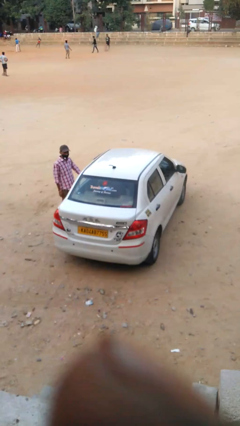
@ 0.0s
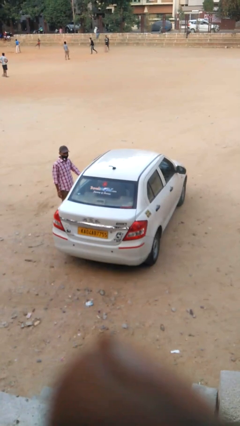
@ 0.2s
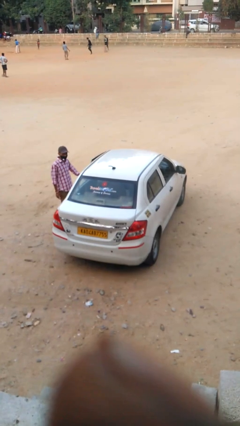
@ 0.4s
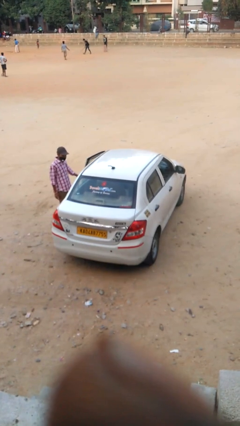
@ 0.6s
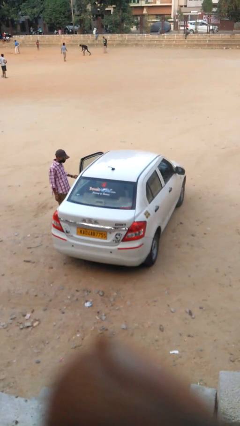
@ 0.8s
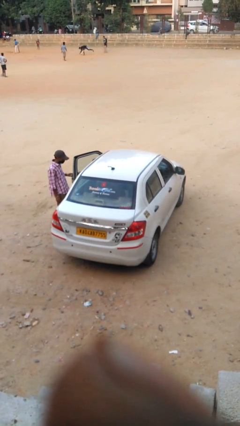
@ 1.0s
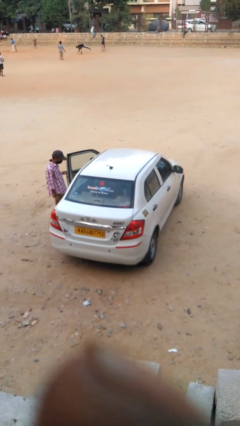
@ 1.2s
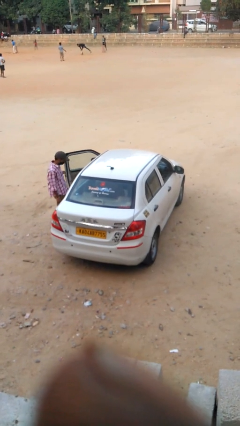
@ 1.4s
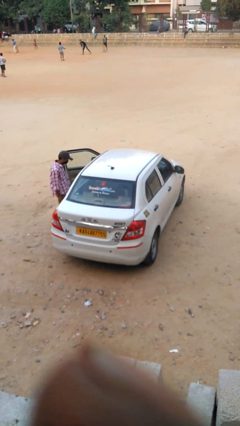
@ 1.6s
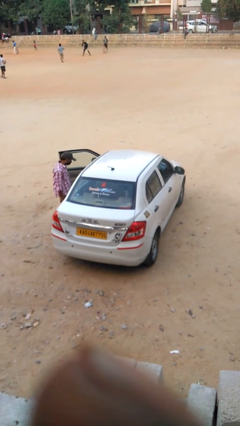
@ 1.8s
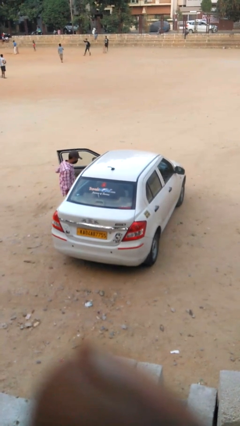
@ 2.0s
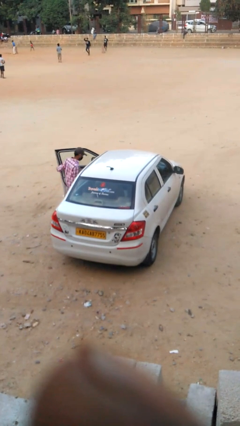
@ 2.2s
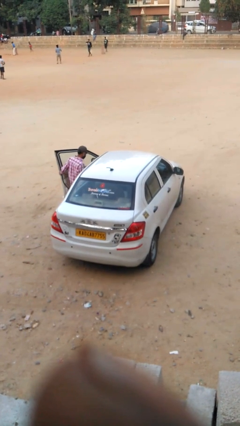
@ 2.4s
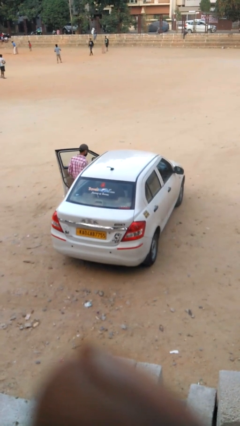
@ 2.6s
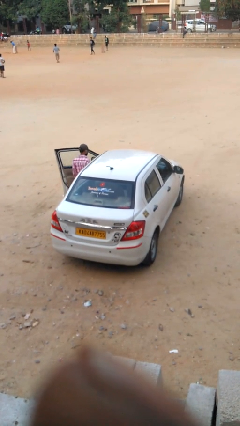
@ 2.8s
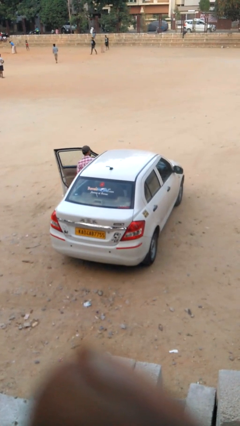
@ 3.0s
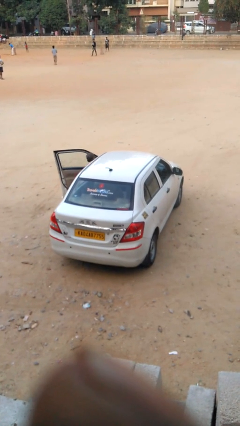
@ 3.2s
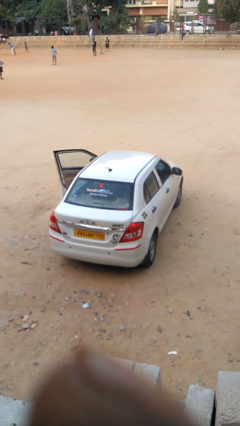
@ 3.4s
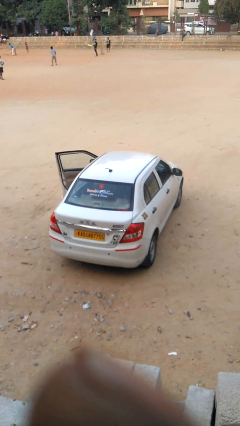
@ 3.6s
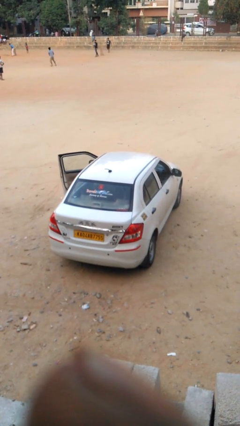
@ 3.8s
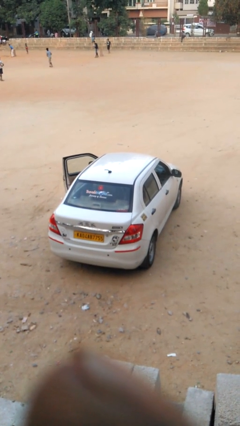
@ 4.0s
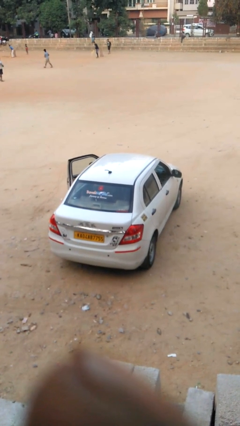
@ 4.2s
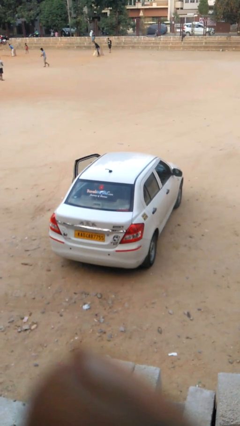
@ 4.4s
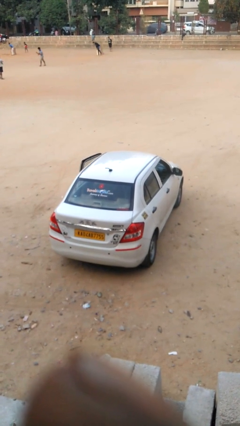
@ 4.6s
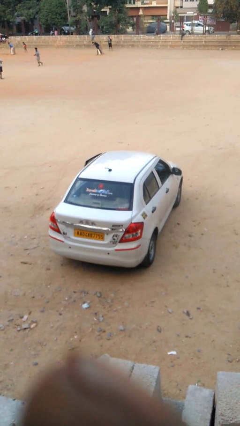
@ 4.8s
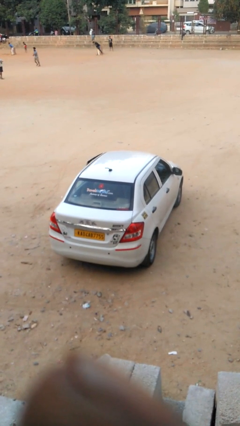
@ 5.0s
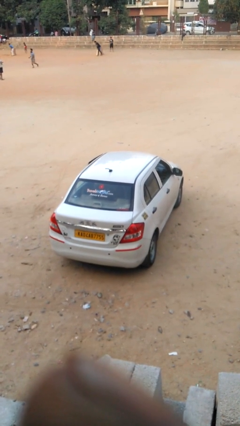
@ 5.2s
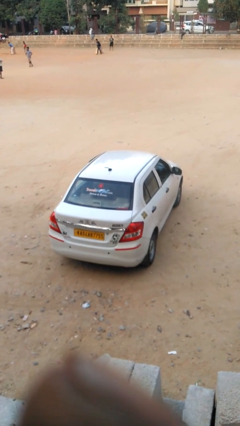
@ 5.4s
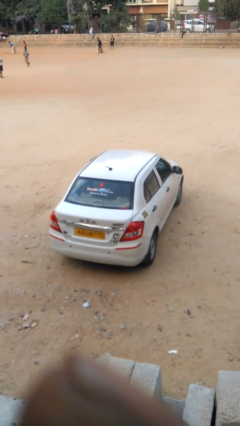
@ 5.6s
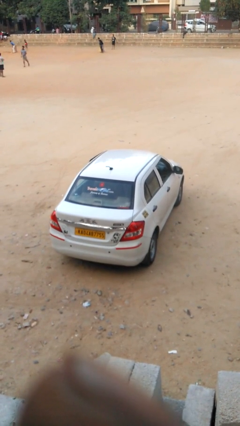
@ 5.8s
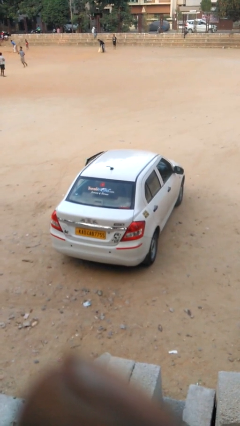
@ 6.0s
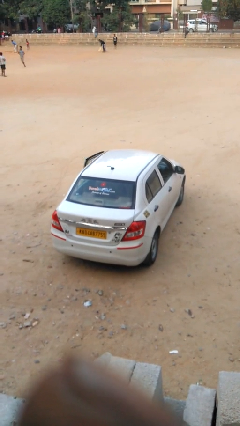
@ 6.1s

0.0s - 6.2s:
car picks up person

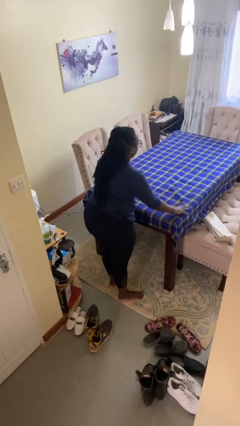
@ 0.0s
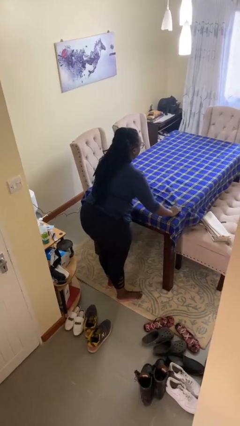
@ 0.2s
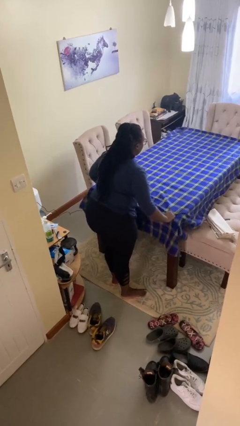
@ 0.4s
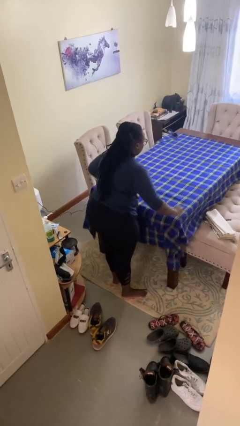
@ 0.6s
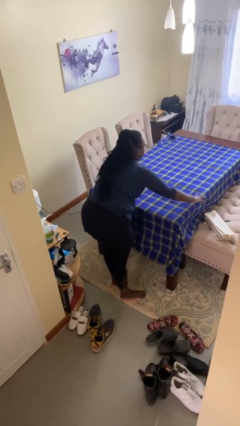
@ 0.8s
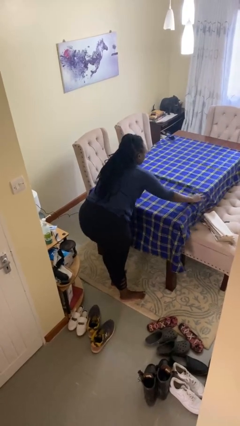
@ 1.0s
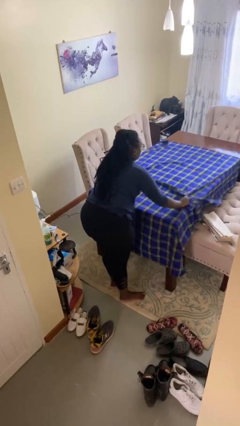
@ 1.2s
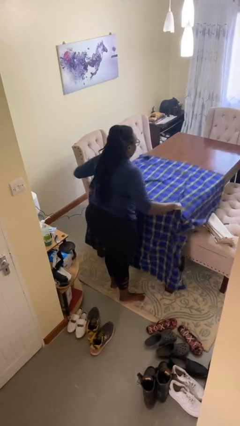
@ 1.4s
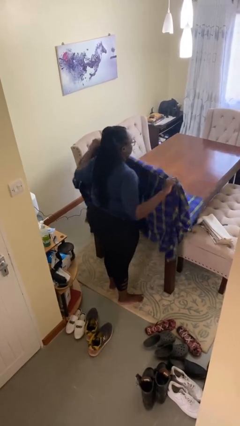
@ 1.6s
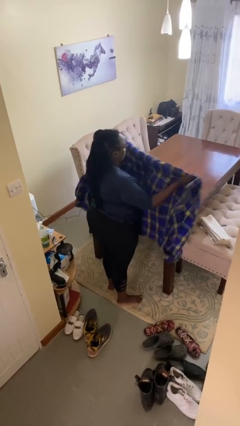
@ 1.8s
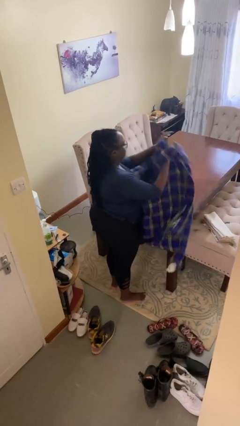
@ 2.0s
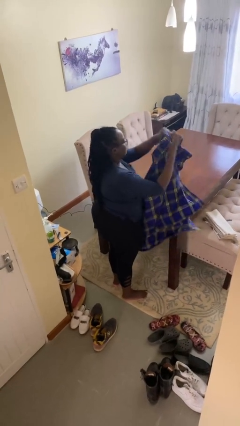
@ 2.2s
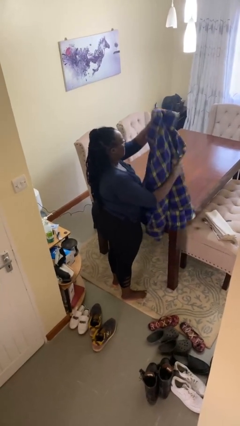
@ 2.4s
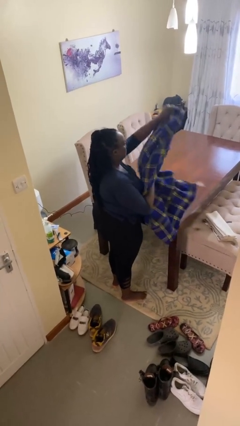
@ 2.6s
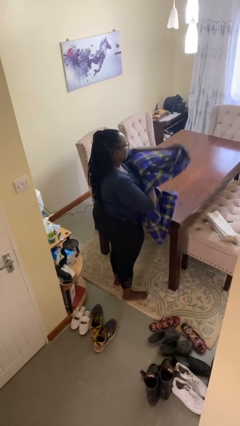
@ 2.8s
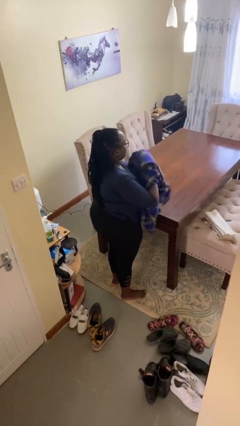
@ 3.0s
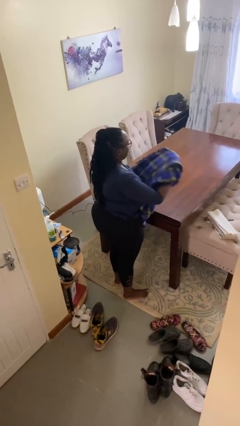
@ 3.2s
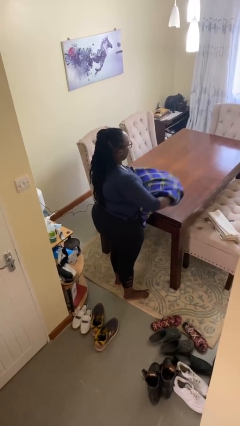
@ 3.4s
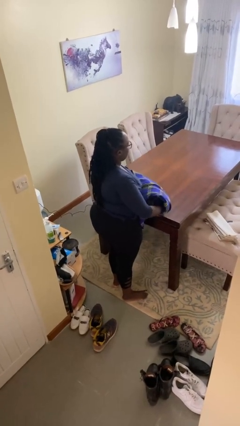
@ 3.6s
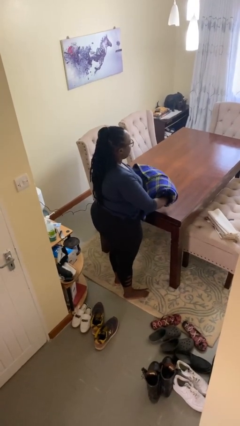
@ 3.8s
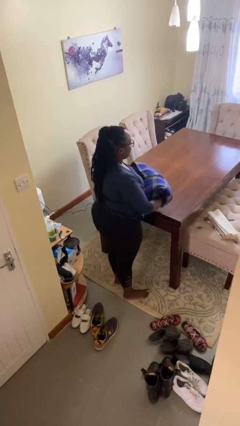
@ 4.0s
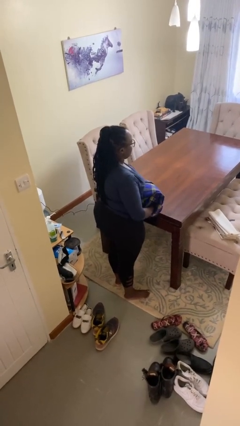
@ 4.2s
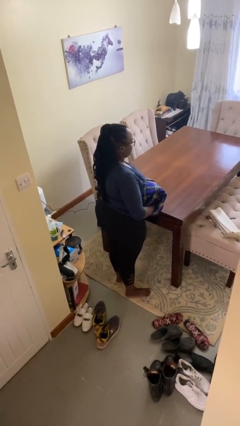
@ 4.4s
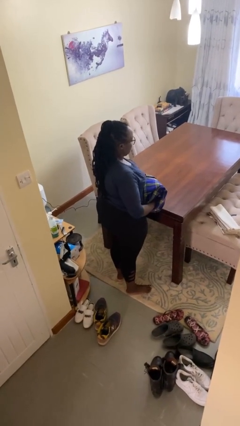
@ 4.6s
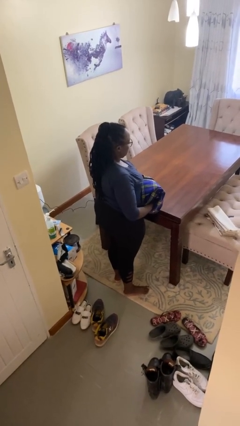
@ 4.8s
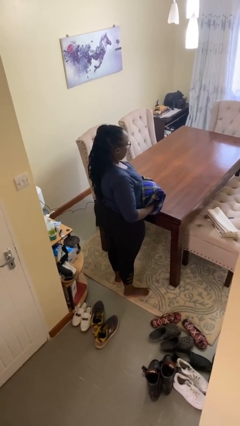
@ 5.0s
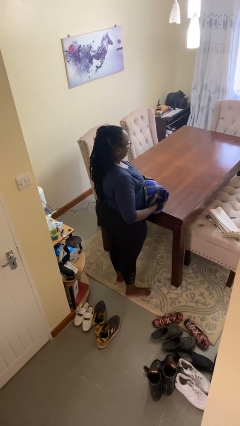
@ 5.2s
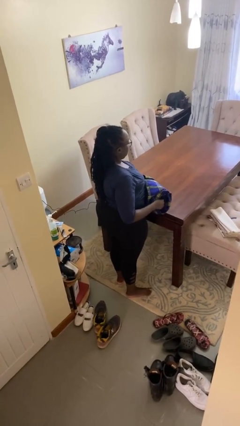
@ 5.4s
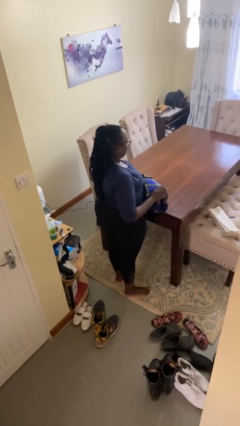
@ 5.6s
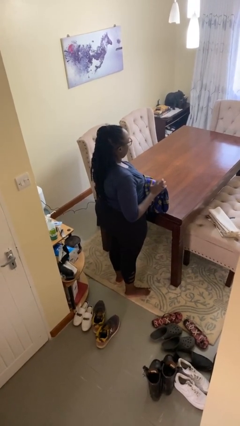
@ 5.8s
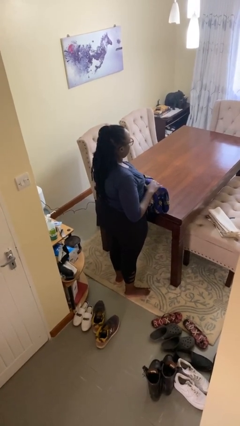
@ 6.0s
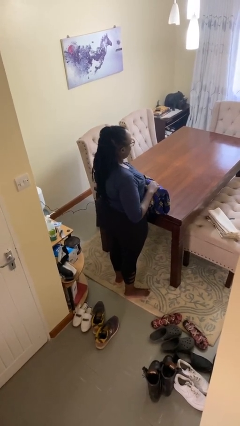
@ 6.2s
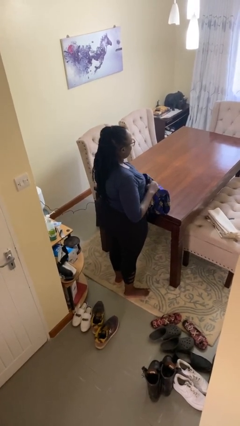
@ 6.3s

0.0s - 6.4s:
person folds tablecloth

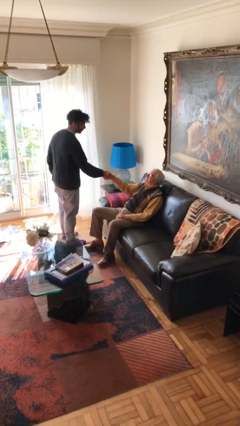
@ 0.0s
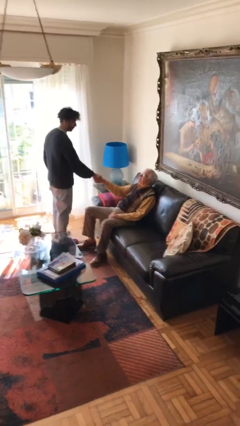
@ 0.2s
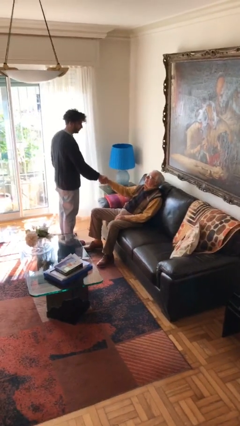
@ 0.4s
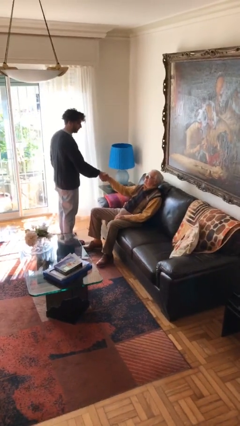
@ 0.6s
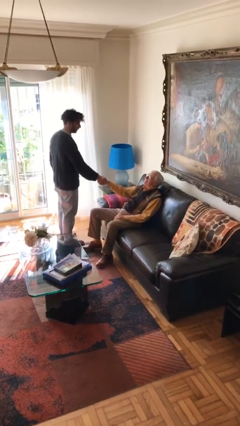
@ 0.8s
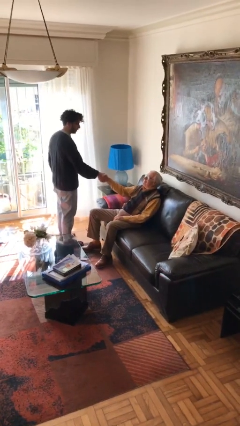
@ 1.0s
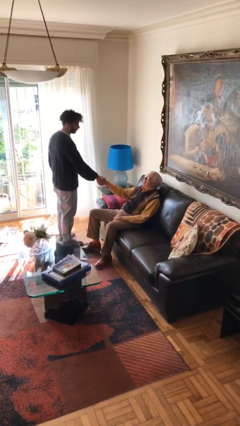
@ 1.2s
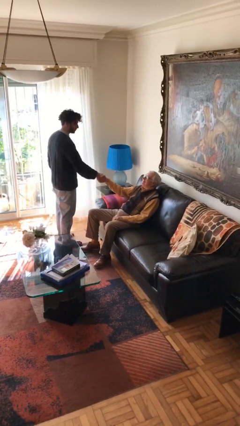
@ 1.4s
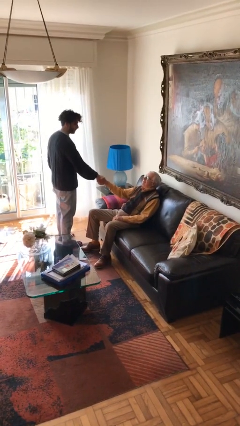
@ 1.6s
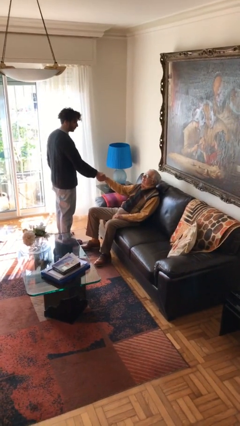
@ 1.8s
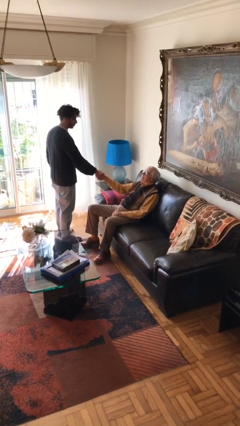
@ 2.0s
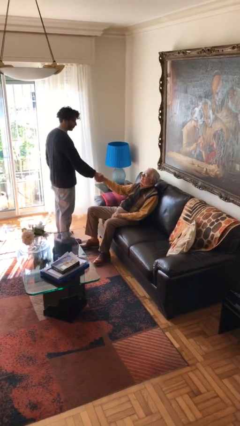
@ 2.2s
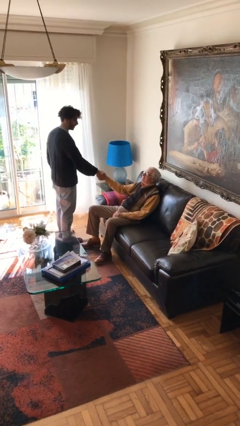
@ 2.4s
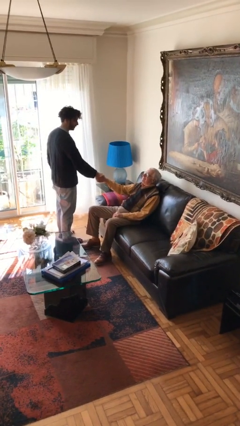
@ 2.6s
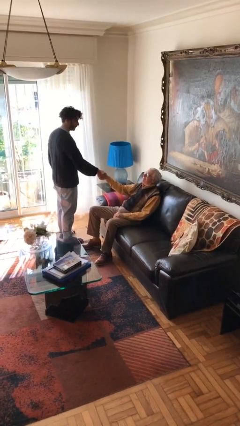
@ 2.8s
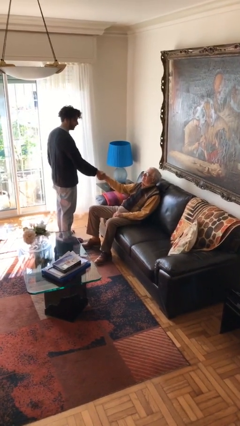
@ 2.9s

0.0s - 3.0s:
person shakes hand

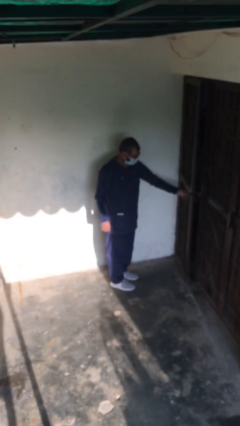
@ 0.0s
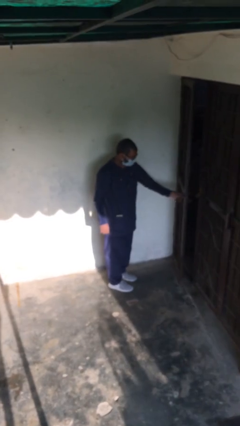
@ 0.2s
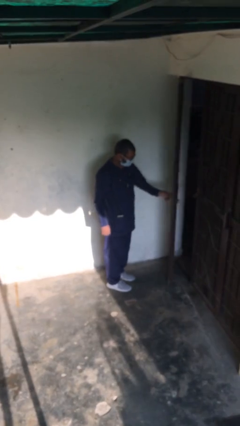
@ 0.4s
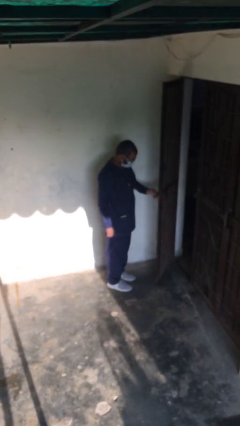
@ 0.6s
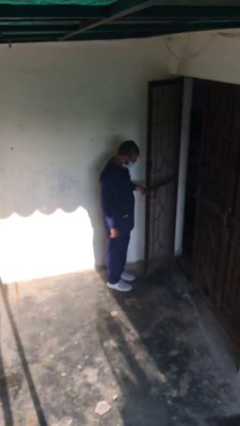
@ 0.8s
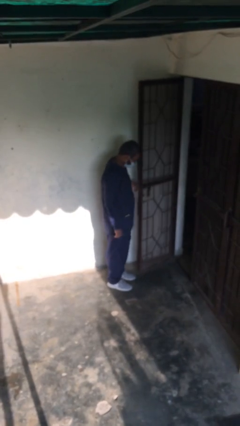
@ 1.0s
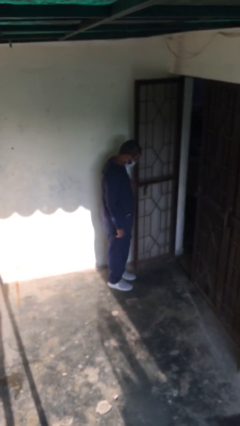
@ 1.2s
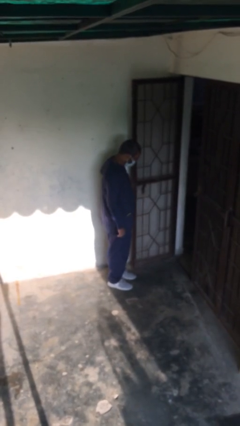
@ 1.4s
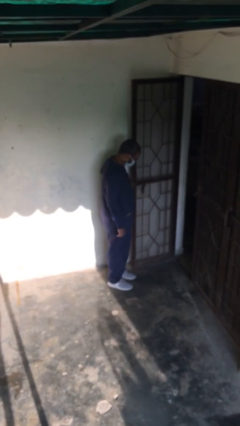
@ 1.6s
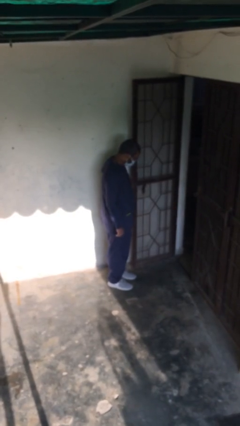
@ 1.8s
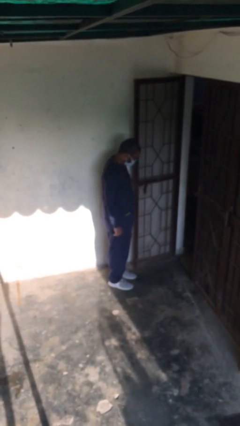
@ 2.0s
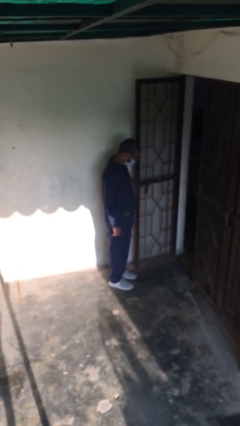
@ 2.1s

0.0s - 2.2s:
person opens facility door
